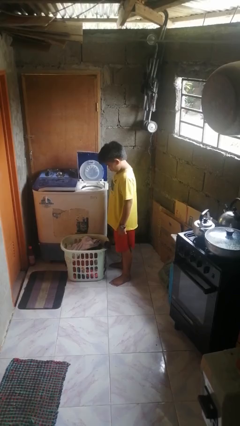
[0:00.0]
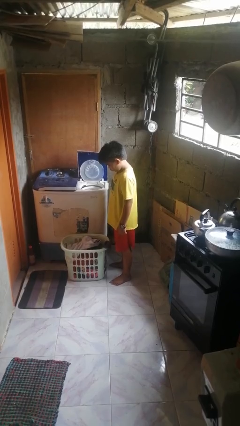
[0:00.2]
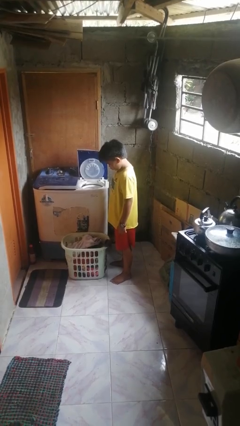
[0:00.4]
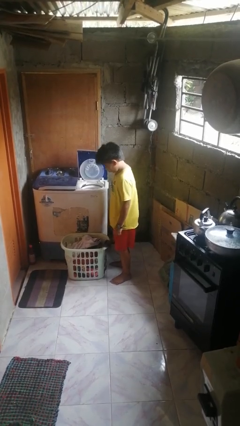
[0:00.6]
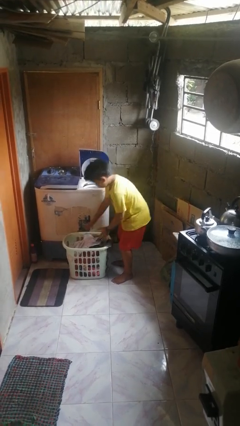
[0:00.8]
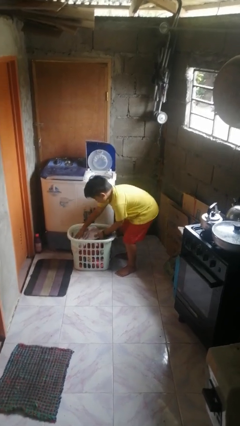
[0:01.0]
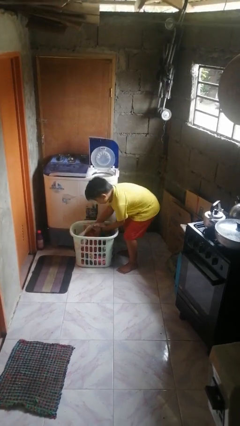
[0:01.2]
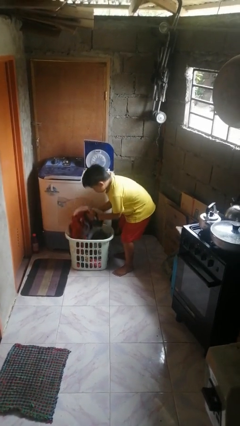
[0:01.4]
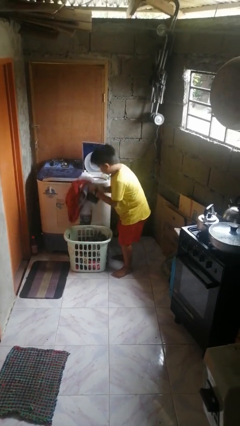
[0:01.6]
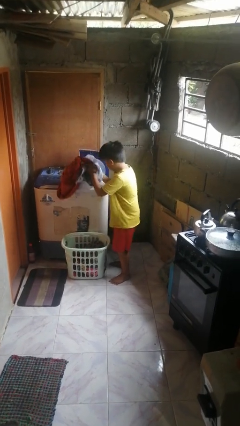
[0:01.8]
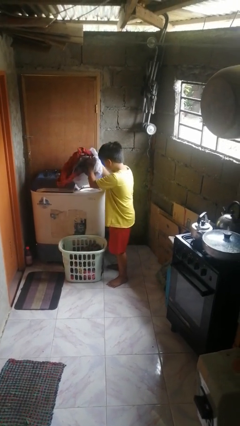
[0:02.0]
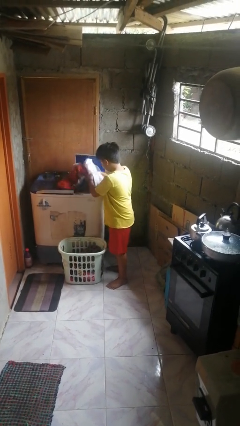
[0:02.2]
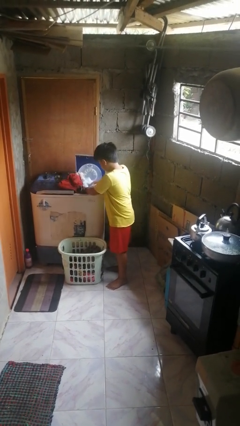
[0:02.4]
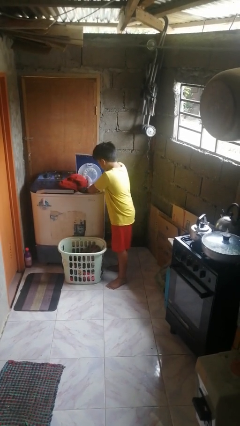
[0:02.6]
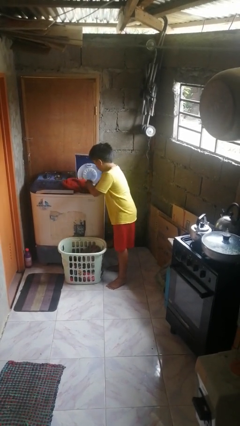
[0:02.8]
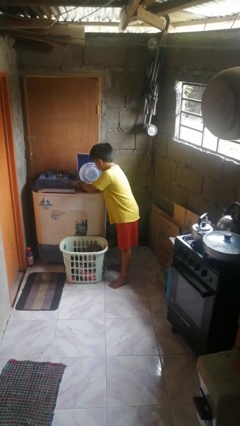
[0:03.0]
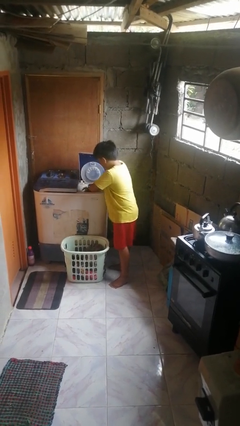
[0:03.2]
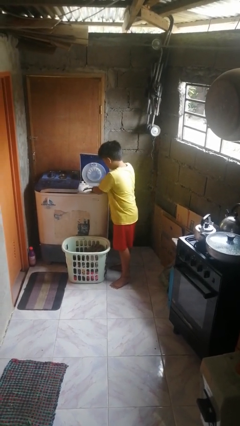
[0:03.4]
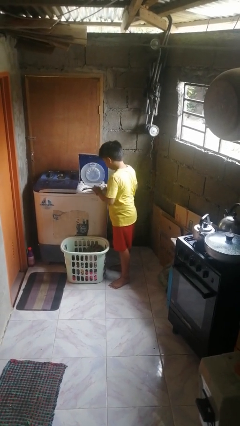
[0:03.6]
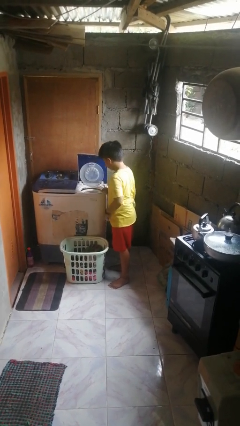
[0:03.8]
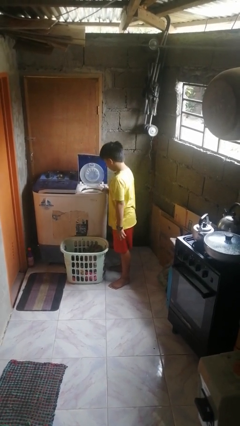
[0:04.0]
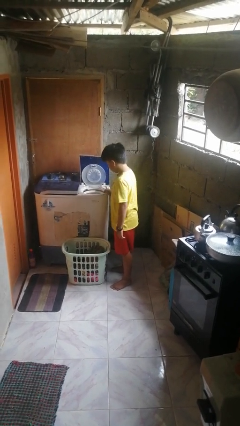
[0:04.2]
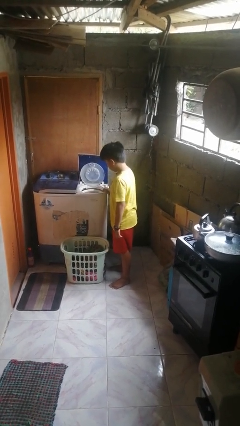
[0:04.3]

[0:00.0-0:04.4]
person loads dryer

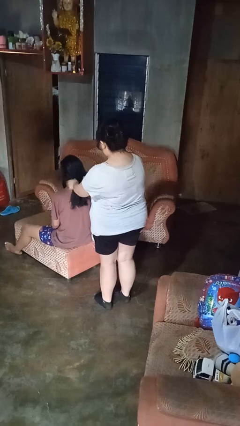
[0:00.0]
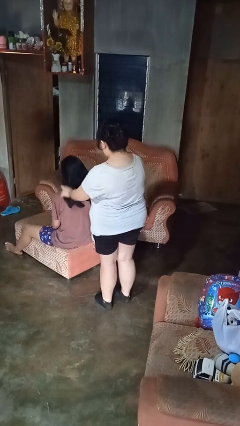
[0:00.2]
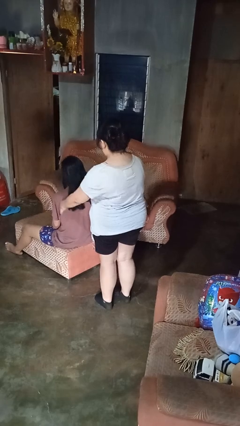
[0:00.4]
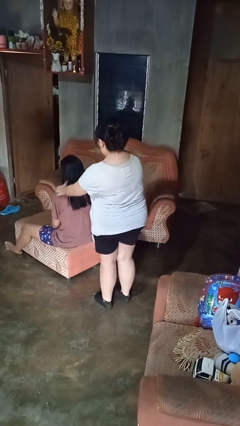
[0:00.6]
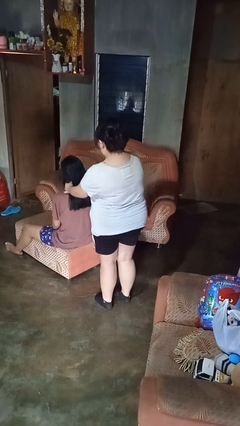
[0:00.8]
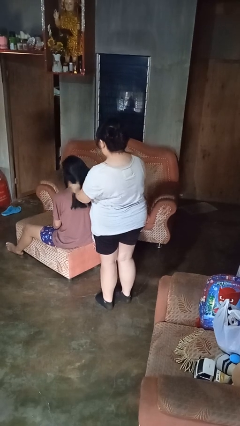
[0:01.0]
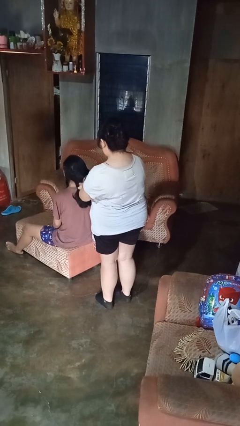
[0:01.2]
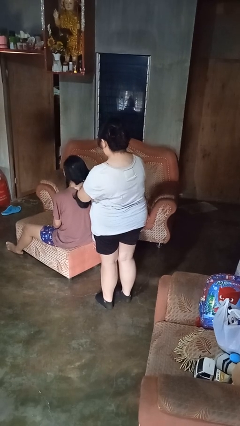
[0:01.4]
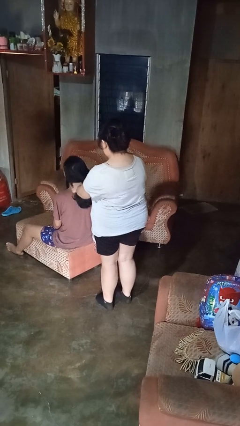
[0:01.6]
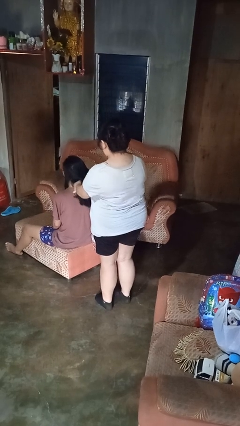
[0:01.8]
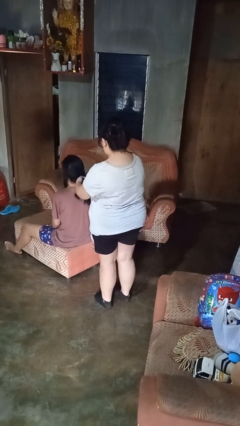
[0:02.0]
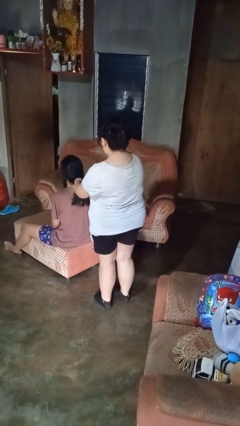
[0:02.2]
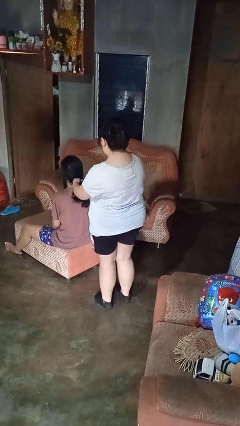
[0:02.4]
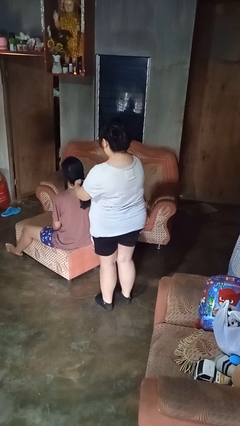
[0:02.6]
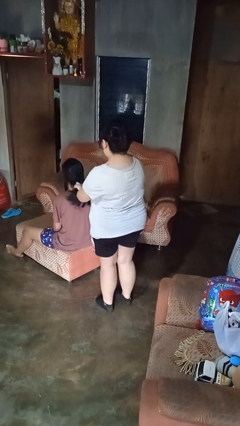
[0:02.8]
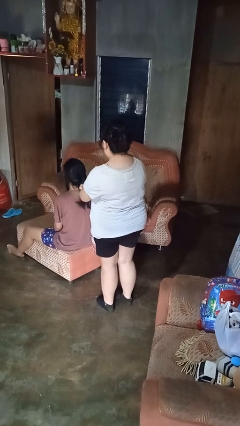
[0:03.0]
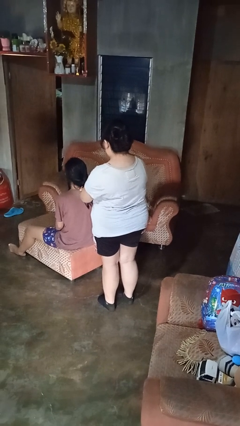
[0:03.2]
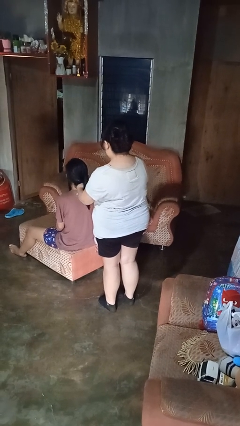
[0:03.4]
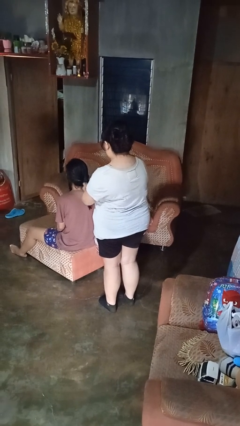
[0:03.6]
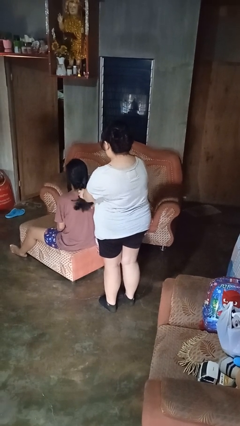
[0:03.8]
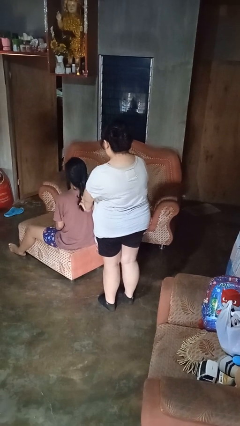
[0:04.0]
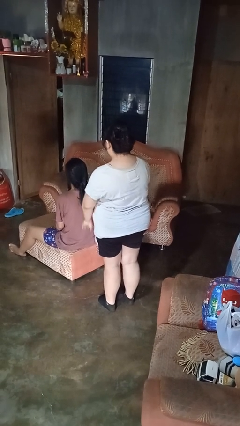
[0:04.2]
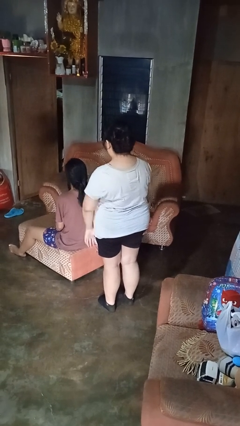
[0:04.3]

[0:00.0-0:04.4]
person braids hair of person

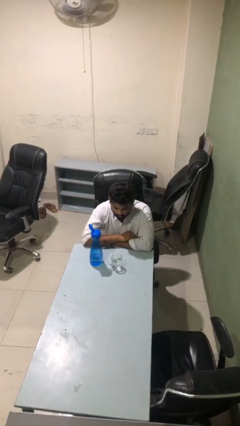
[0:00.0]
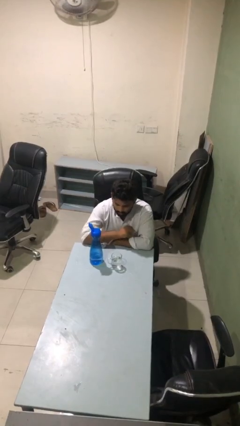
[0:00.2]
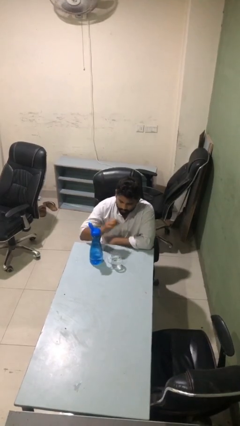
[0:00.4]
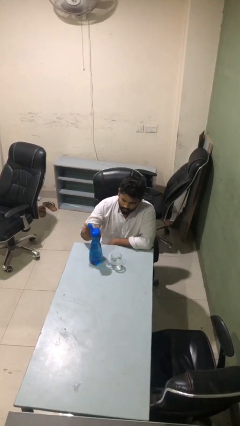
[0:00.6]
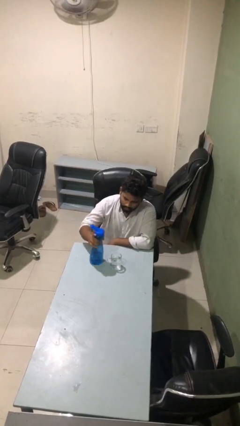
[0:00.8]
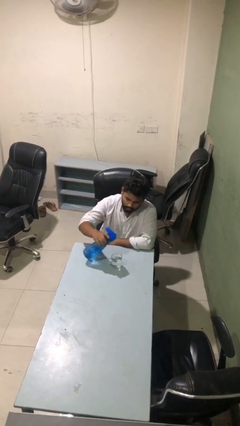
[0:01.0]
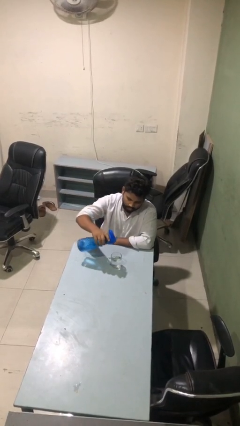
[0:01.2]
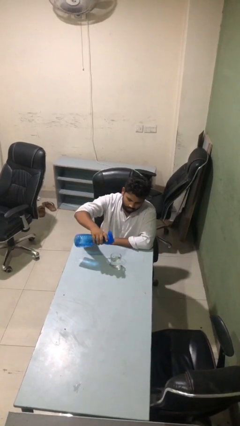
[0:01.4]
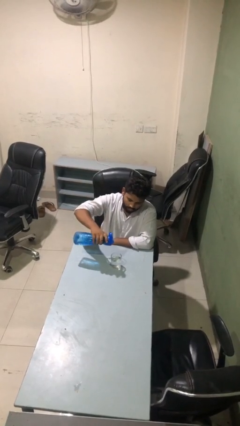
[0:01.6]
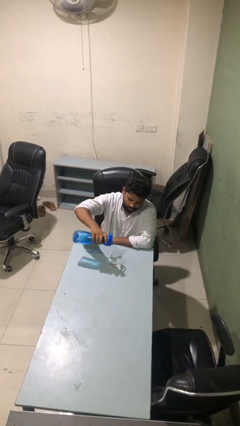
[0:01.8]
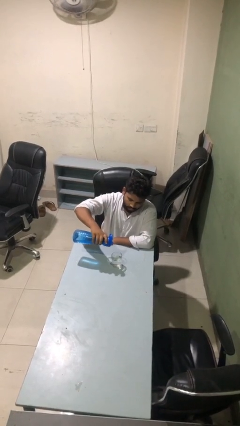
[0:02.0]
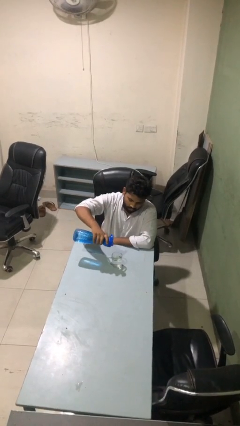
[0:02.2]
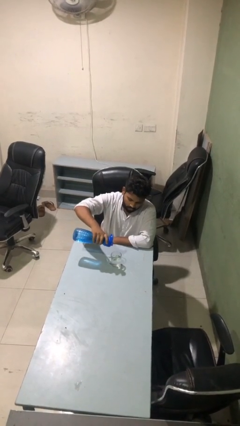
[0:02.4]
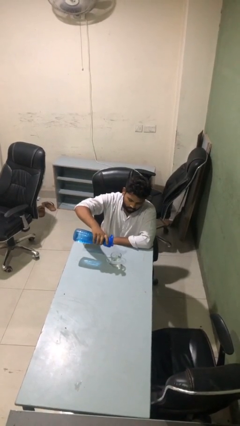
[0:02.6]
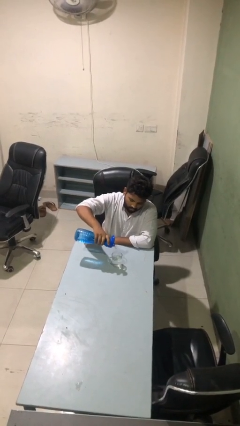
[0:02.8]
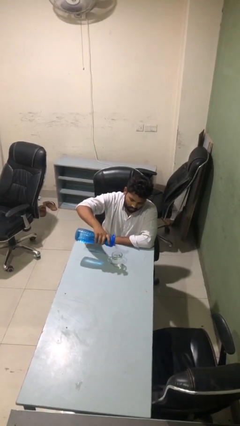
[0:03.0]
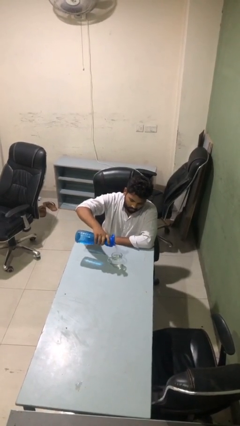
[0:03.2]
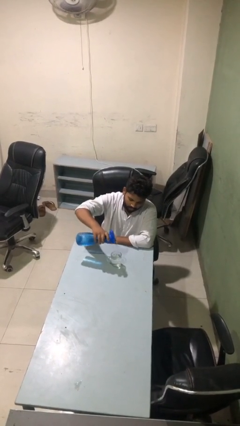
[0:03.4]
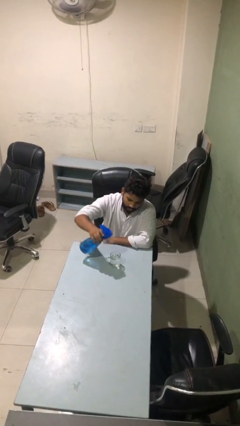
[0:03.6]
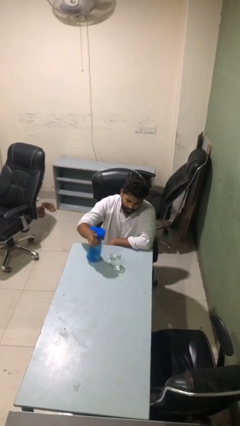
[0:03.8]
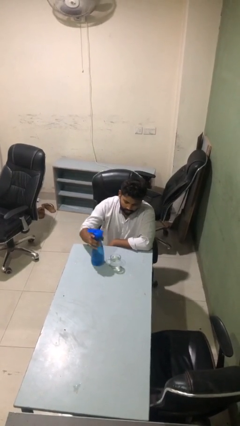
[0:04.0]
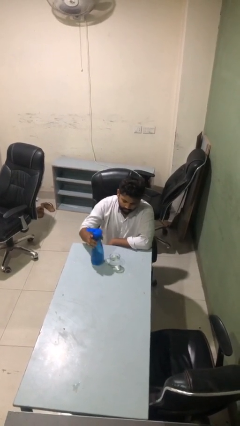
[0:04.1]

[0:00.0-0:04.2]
person pours liquid into cup

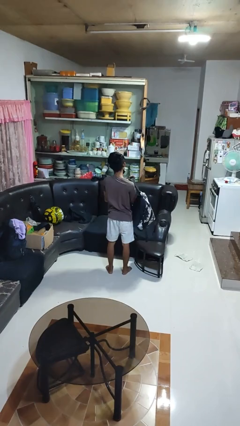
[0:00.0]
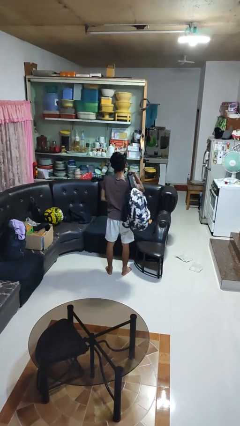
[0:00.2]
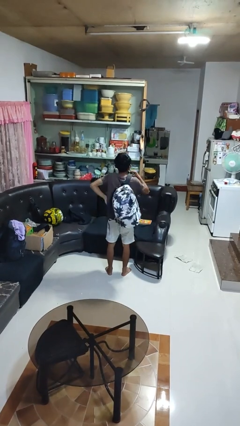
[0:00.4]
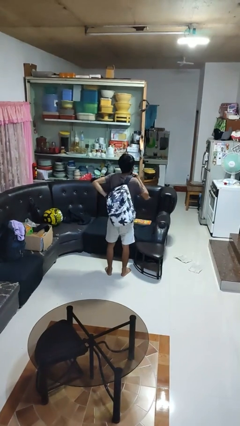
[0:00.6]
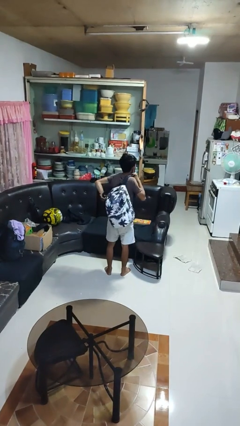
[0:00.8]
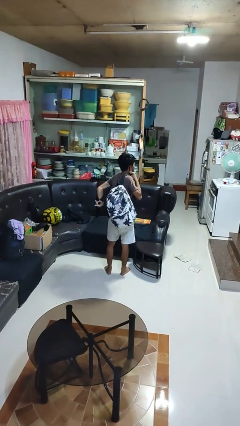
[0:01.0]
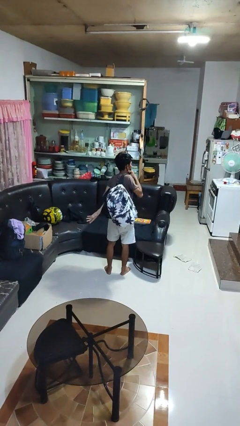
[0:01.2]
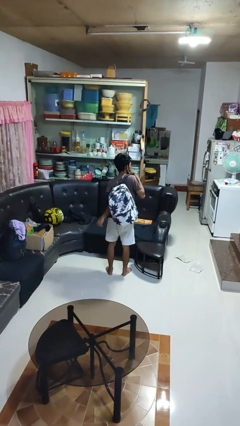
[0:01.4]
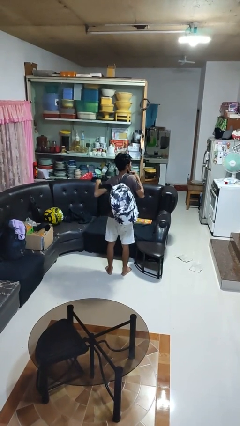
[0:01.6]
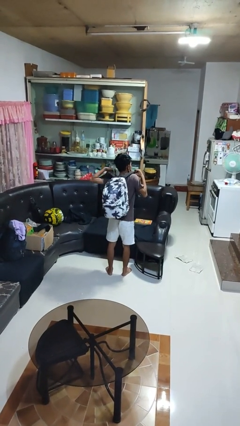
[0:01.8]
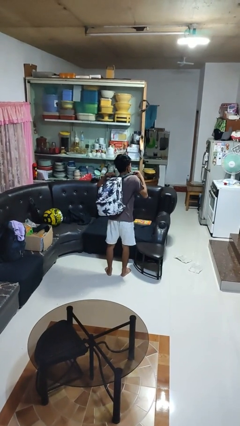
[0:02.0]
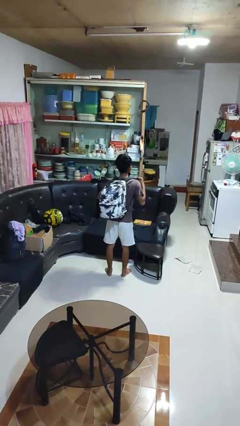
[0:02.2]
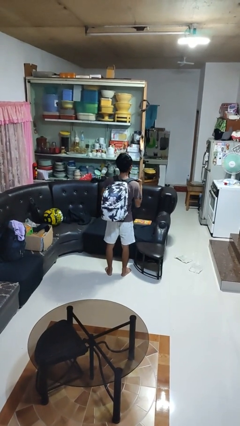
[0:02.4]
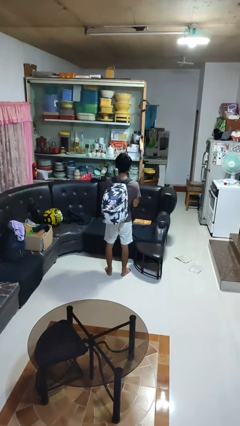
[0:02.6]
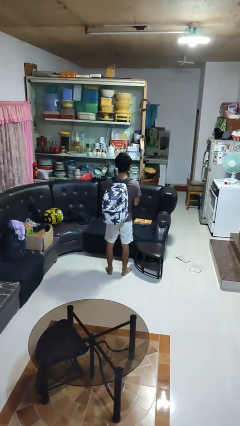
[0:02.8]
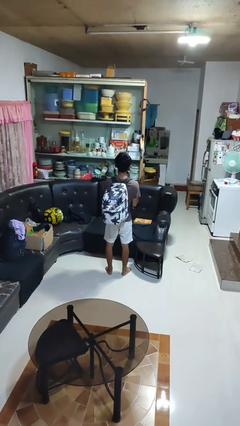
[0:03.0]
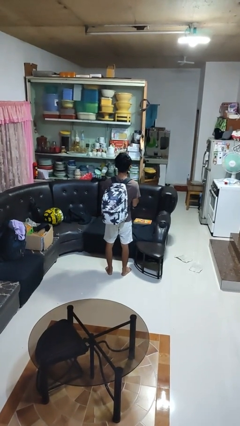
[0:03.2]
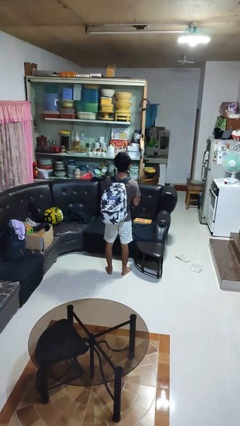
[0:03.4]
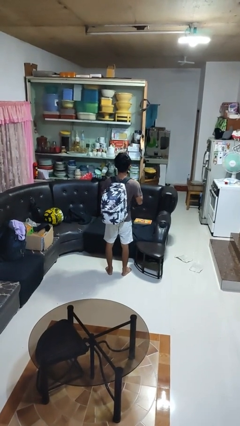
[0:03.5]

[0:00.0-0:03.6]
person puts on backpack

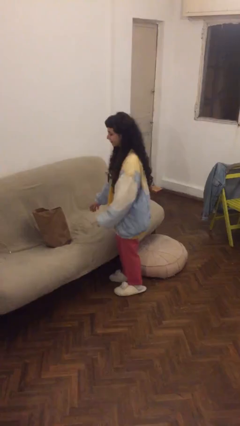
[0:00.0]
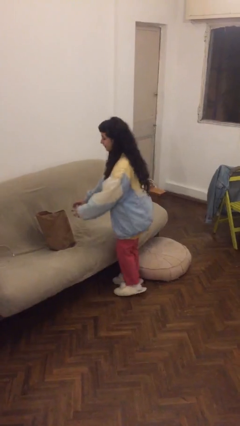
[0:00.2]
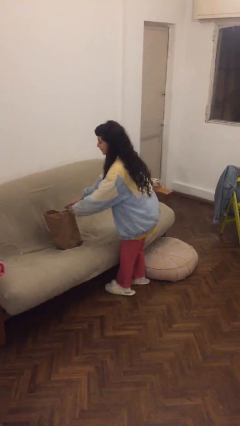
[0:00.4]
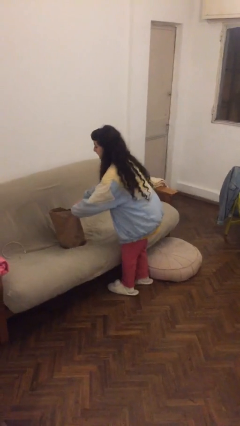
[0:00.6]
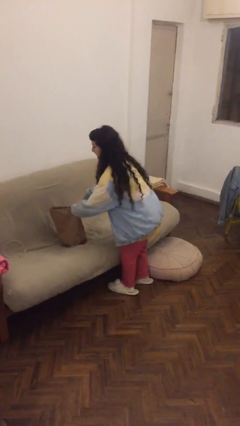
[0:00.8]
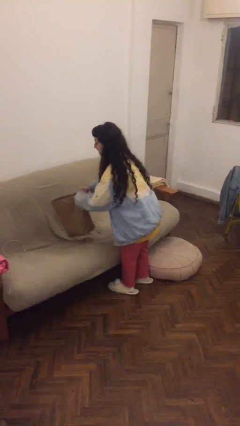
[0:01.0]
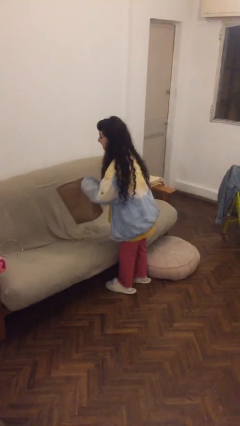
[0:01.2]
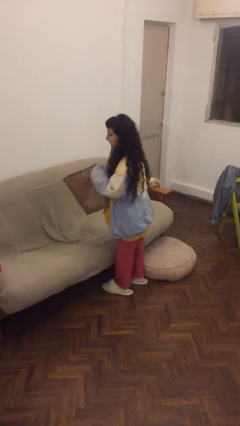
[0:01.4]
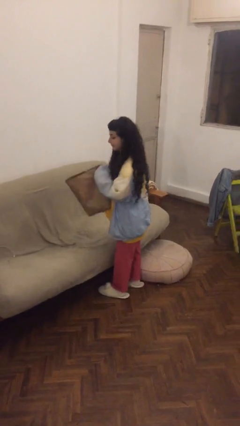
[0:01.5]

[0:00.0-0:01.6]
person picks up object from couch
